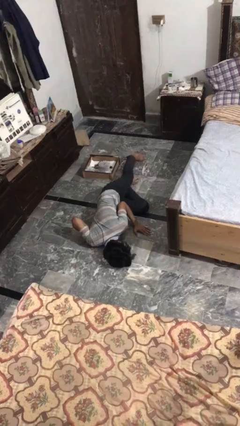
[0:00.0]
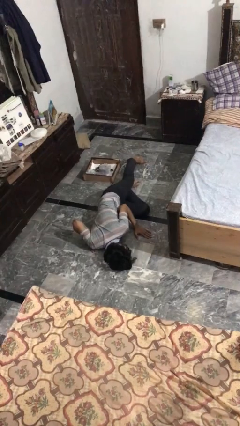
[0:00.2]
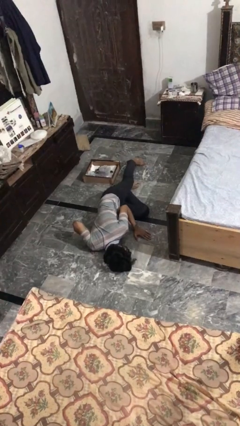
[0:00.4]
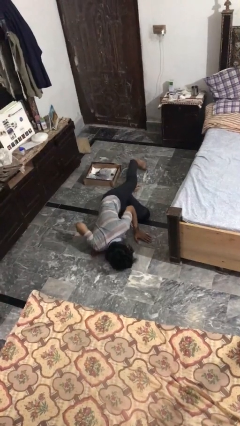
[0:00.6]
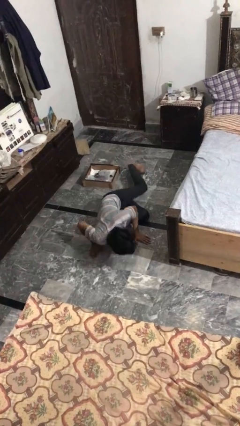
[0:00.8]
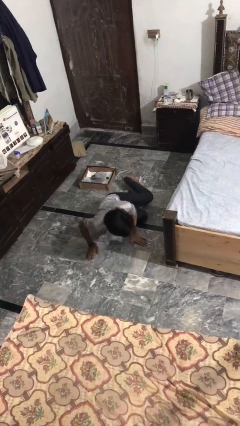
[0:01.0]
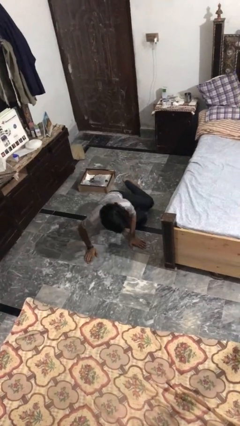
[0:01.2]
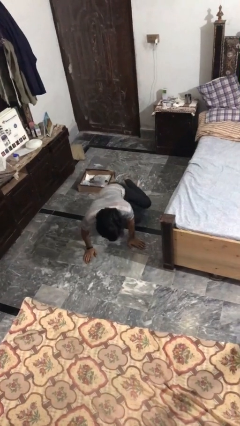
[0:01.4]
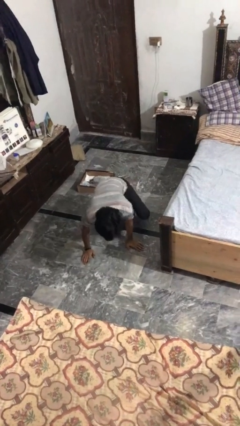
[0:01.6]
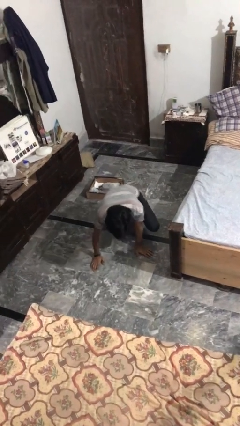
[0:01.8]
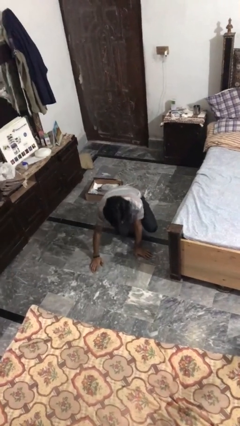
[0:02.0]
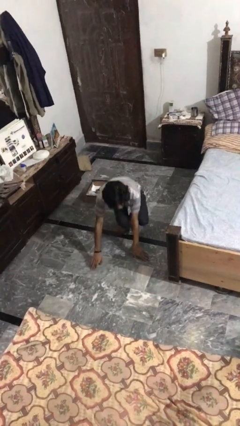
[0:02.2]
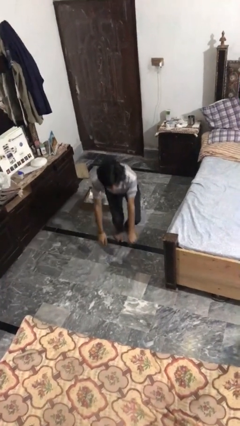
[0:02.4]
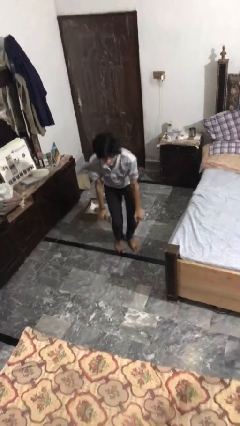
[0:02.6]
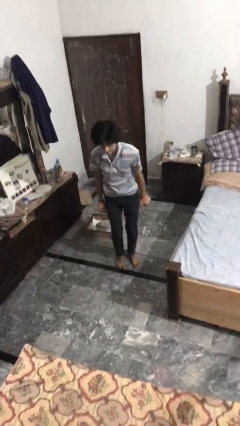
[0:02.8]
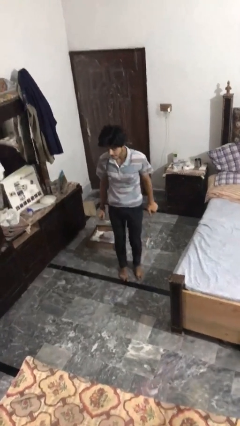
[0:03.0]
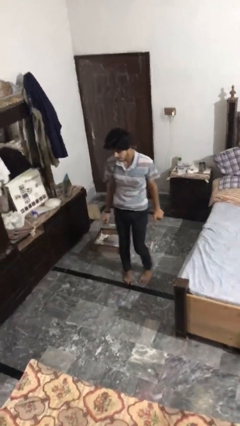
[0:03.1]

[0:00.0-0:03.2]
person stands up from floor

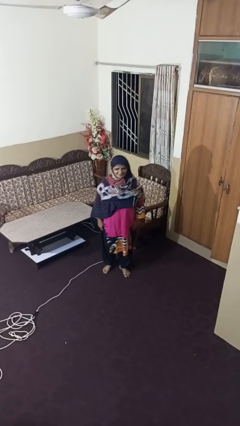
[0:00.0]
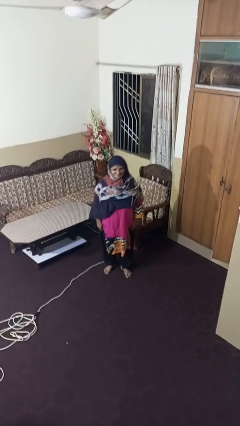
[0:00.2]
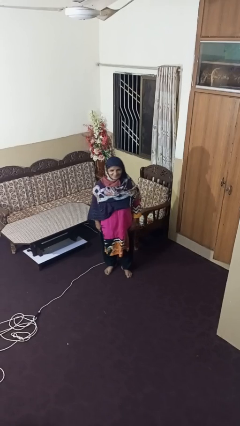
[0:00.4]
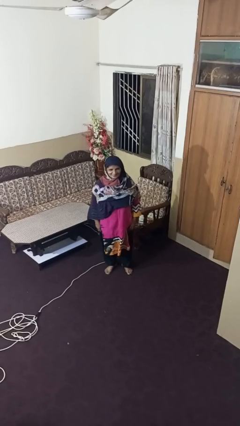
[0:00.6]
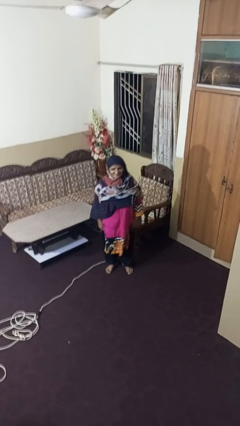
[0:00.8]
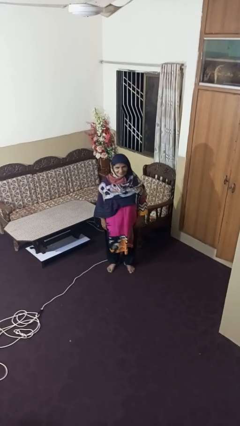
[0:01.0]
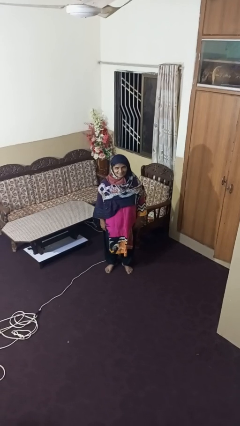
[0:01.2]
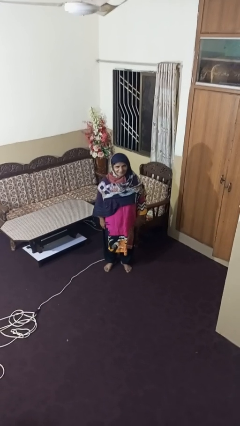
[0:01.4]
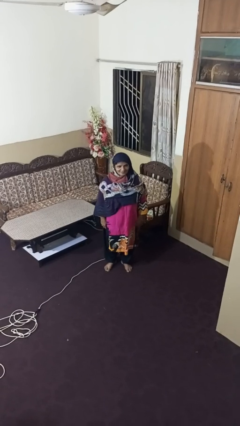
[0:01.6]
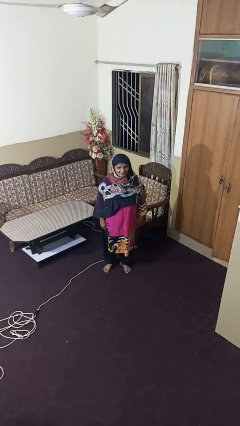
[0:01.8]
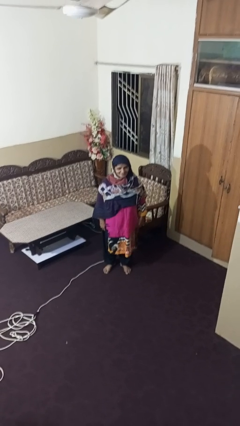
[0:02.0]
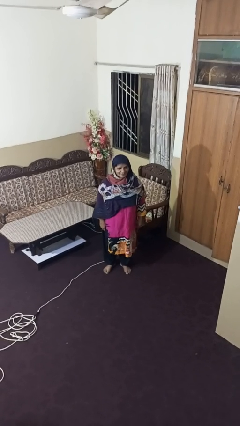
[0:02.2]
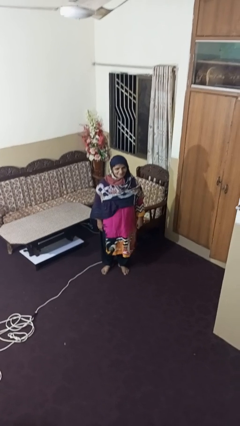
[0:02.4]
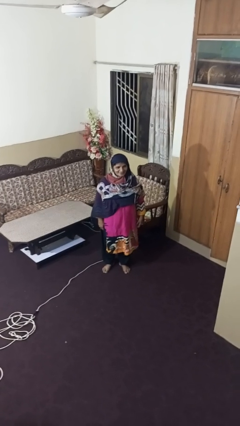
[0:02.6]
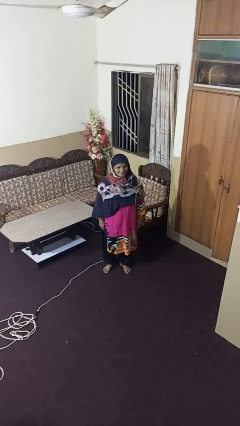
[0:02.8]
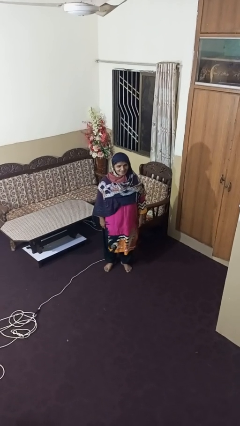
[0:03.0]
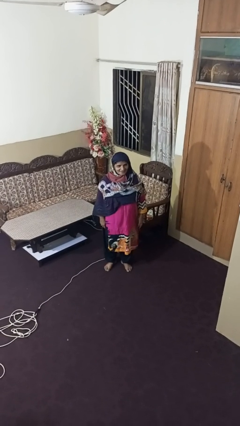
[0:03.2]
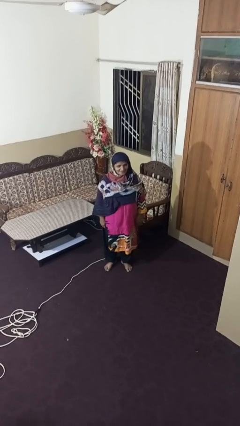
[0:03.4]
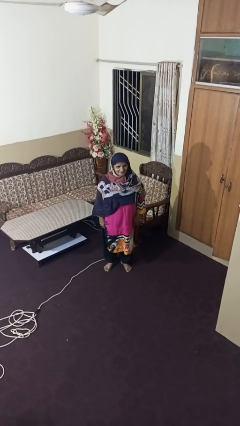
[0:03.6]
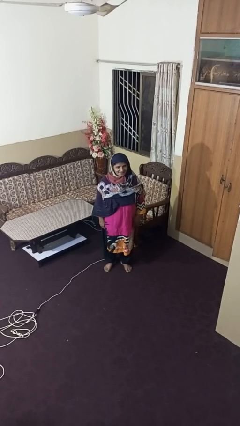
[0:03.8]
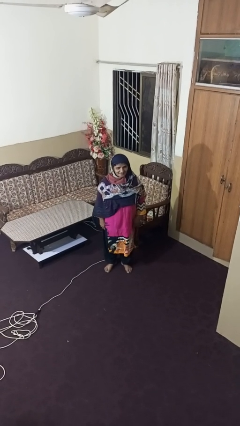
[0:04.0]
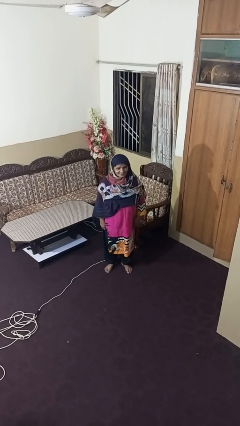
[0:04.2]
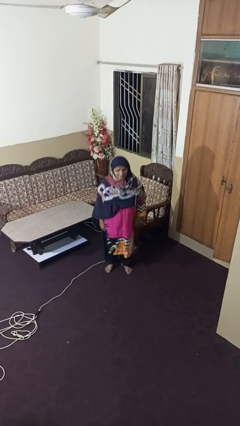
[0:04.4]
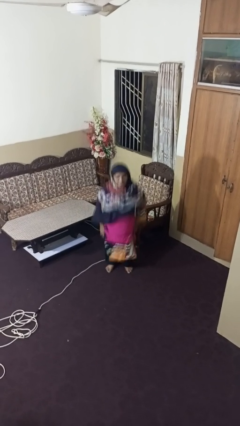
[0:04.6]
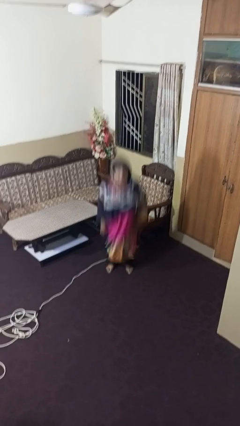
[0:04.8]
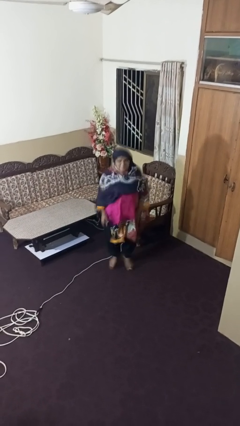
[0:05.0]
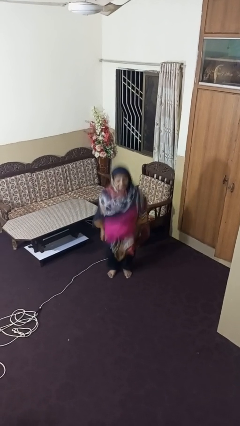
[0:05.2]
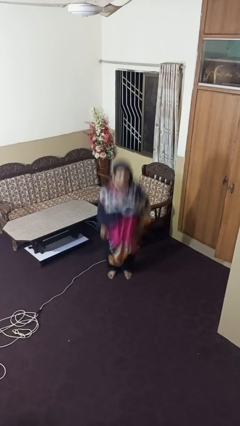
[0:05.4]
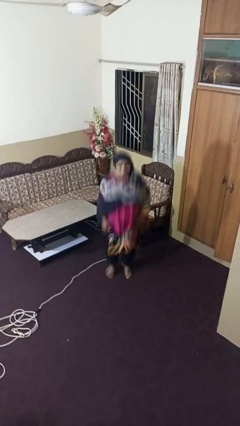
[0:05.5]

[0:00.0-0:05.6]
person jumps

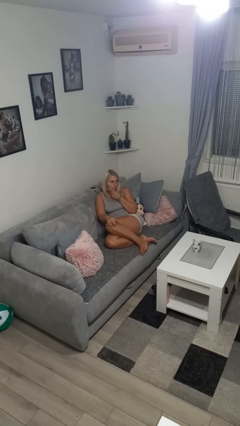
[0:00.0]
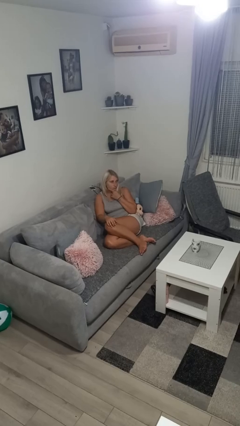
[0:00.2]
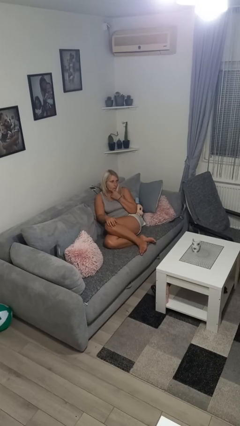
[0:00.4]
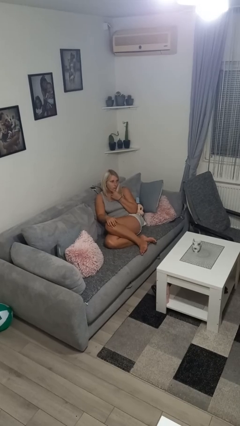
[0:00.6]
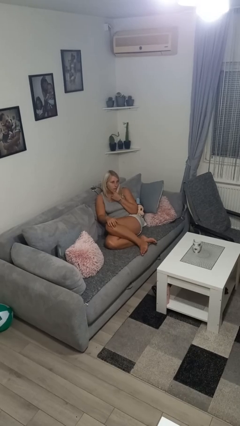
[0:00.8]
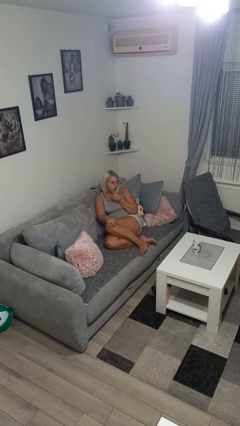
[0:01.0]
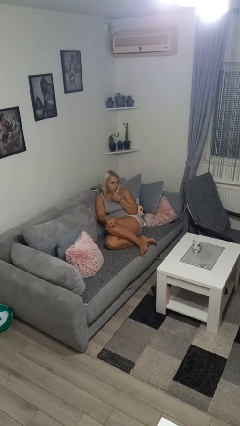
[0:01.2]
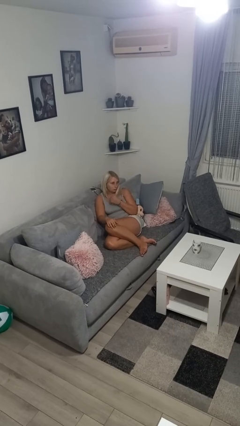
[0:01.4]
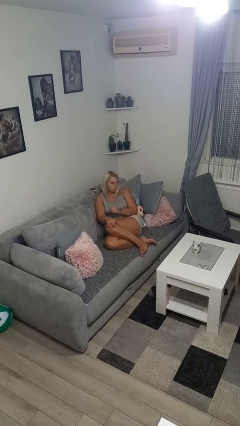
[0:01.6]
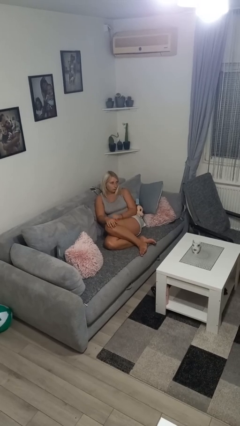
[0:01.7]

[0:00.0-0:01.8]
person strokes chin

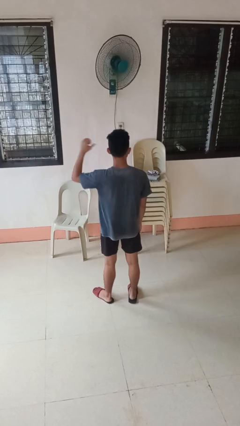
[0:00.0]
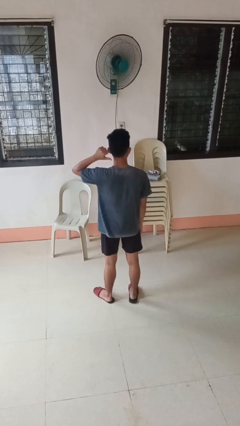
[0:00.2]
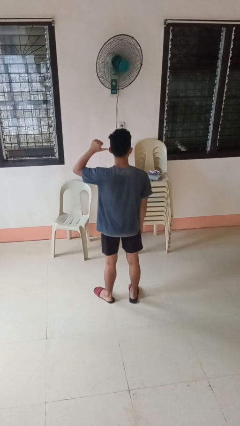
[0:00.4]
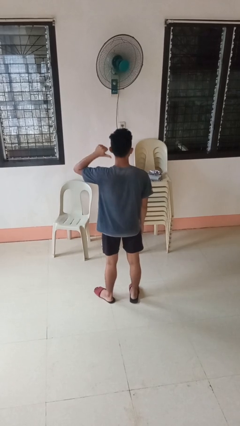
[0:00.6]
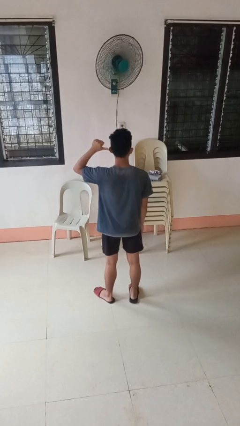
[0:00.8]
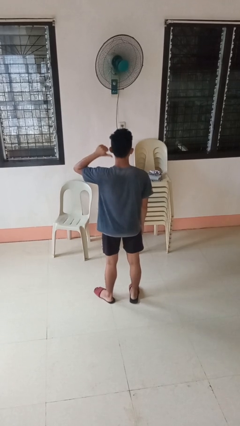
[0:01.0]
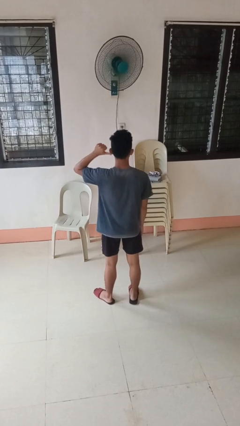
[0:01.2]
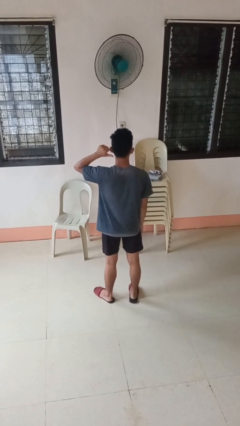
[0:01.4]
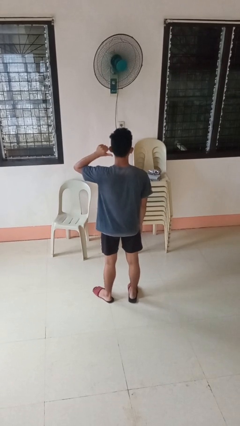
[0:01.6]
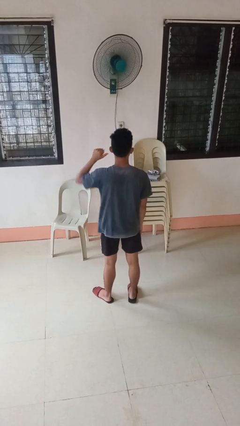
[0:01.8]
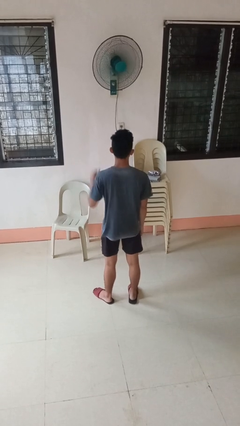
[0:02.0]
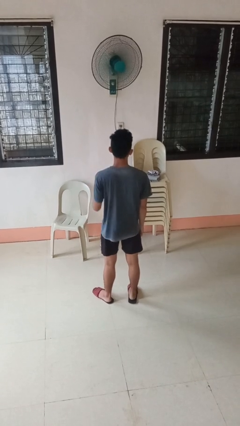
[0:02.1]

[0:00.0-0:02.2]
person gestures behind me

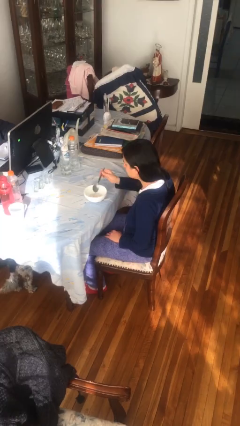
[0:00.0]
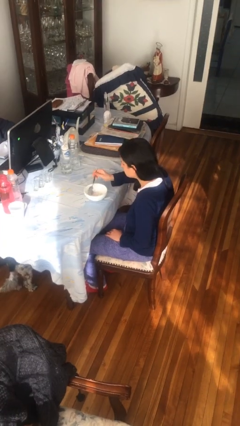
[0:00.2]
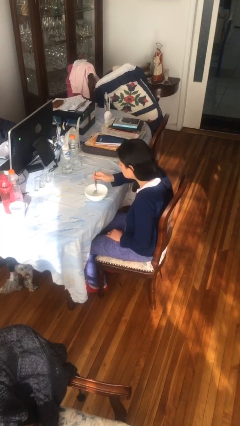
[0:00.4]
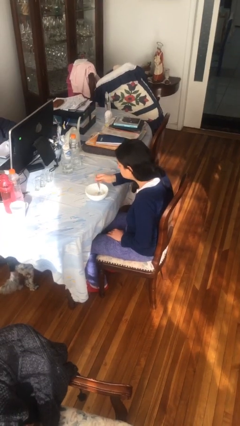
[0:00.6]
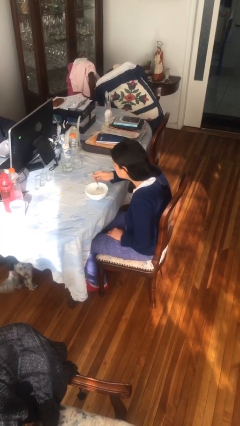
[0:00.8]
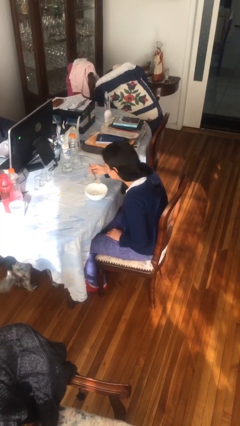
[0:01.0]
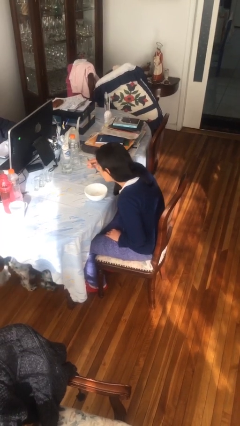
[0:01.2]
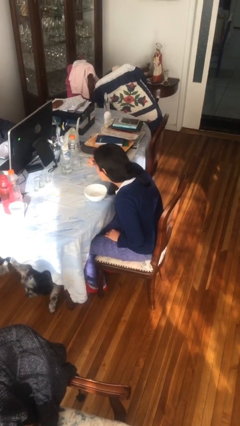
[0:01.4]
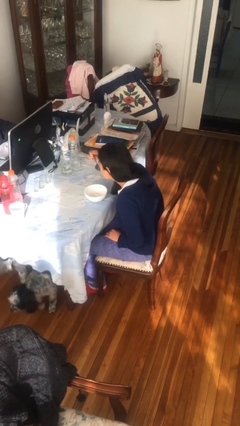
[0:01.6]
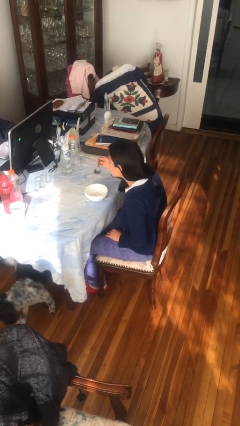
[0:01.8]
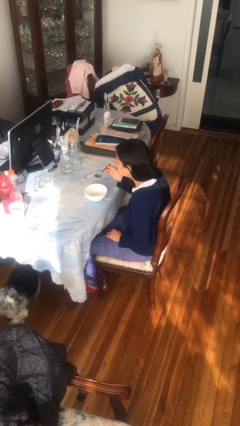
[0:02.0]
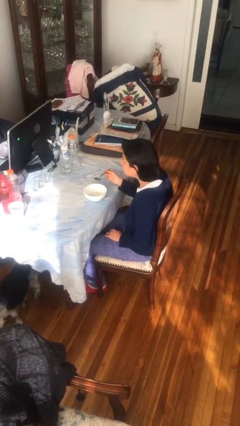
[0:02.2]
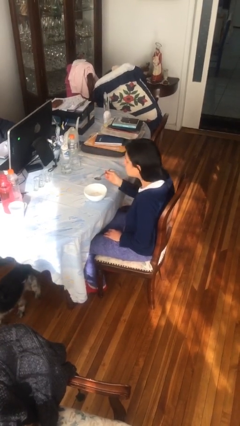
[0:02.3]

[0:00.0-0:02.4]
person eats with utensil

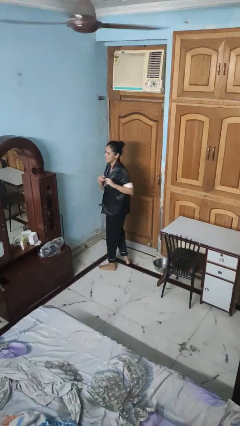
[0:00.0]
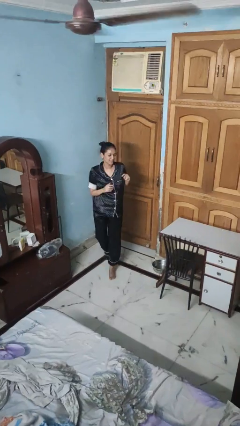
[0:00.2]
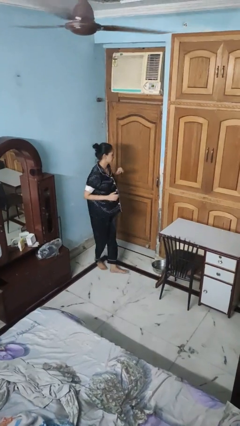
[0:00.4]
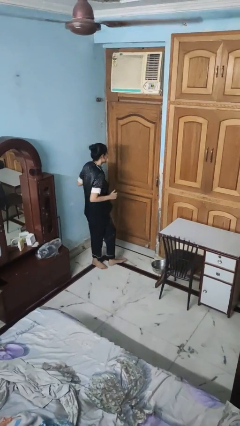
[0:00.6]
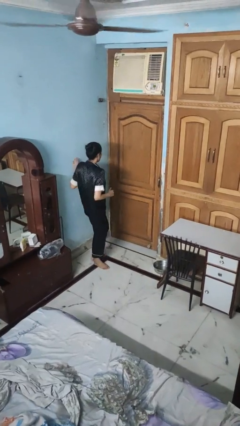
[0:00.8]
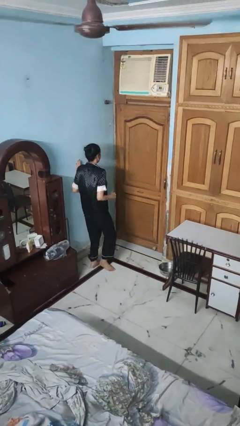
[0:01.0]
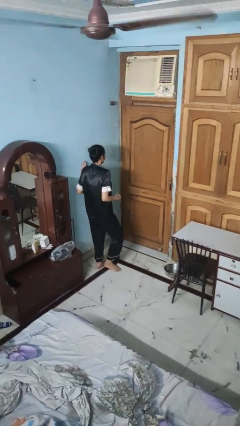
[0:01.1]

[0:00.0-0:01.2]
person twirls

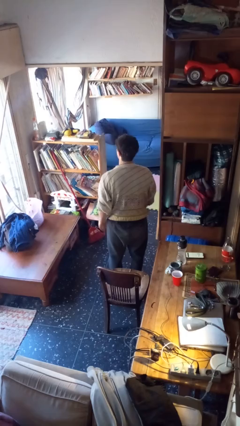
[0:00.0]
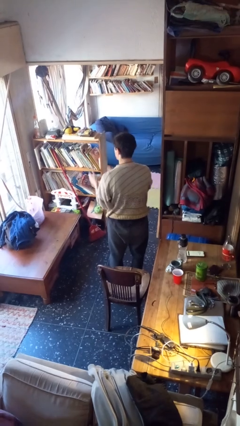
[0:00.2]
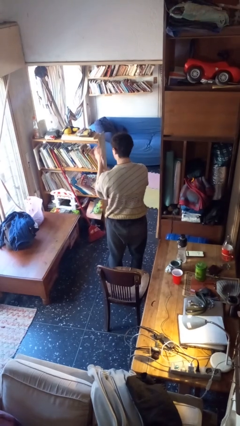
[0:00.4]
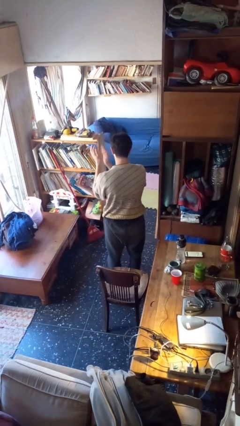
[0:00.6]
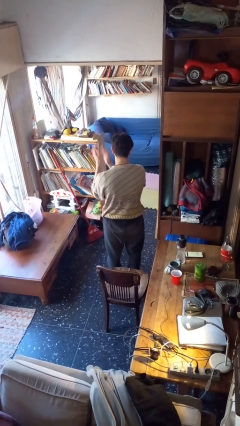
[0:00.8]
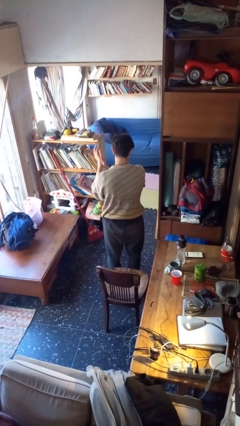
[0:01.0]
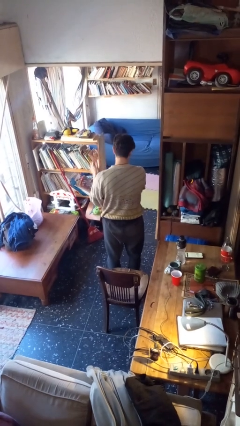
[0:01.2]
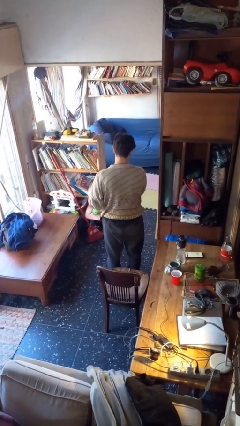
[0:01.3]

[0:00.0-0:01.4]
person claps hands
